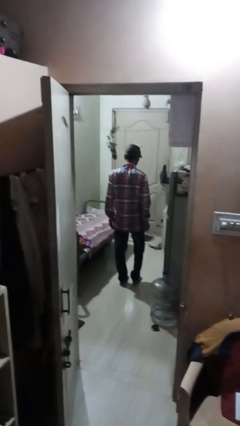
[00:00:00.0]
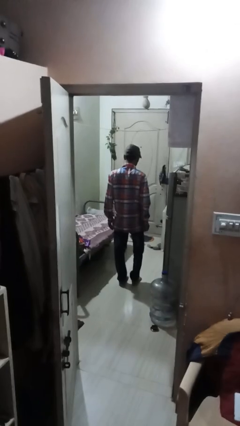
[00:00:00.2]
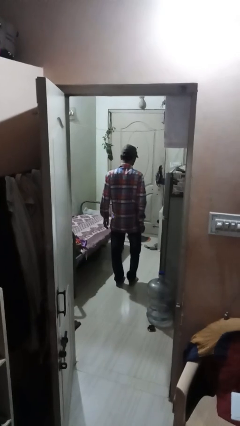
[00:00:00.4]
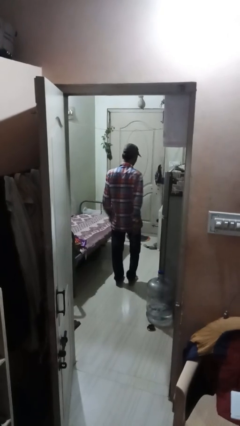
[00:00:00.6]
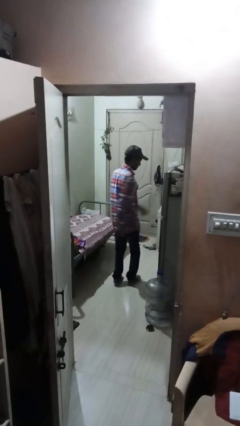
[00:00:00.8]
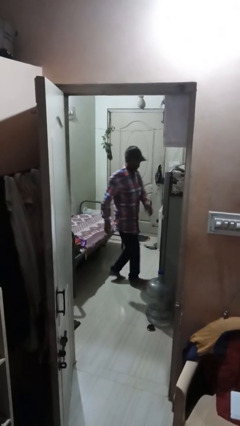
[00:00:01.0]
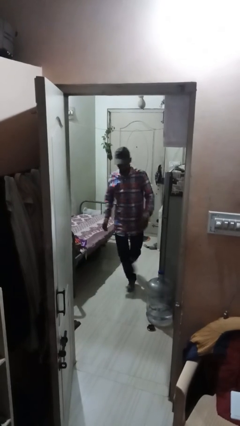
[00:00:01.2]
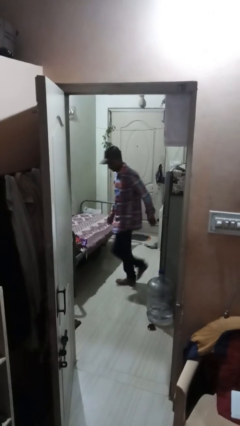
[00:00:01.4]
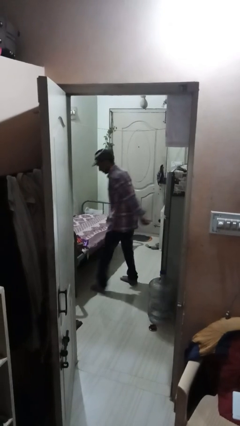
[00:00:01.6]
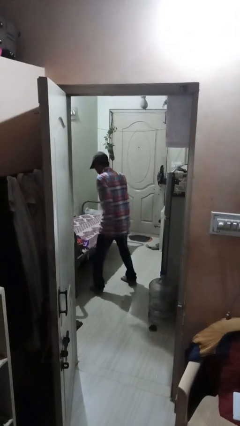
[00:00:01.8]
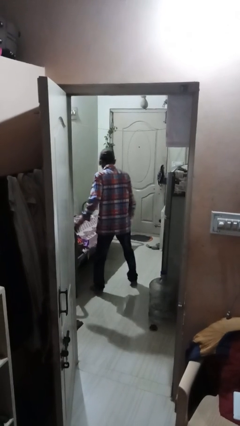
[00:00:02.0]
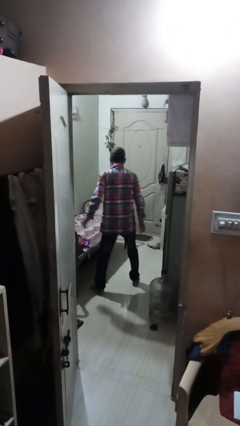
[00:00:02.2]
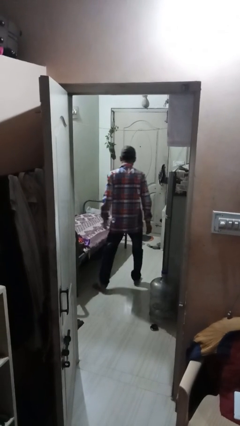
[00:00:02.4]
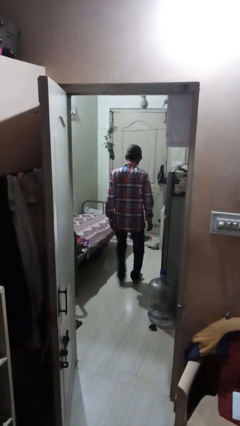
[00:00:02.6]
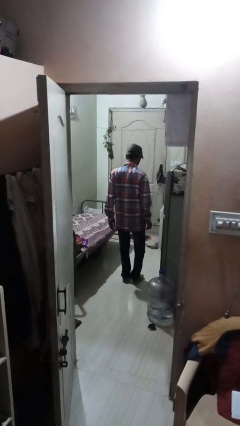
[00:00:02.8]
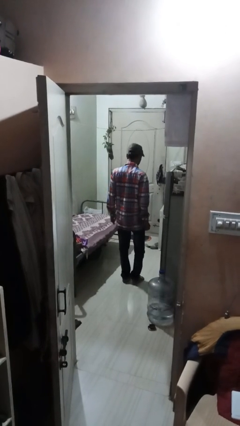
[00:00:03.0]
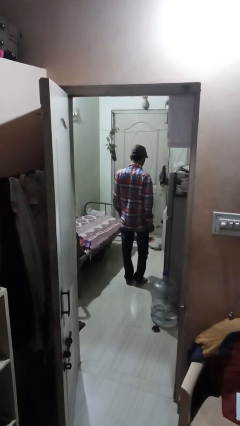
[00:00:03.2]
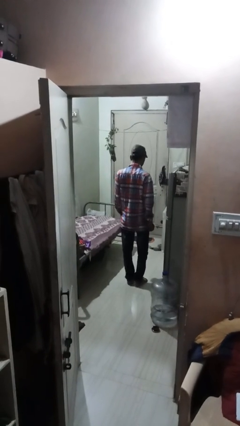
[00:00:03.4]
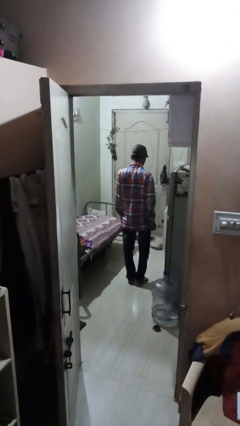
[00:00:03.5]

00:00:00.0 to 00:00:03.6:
person twirls

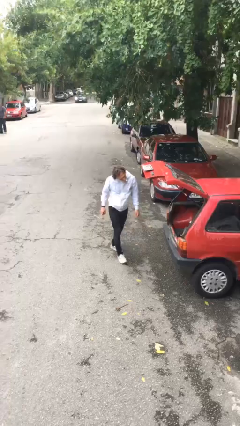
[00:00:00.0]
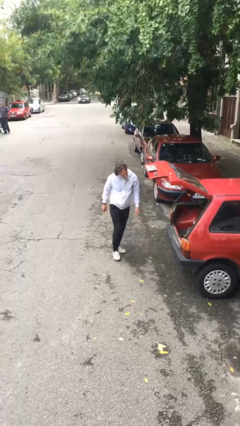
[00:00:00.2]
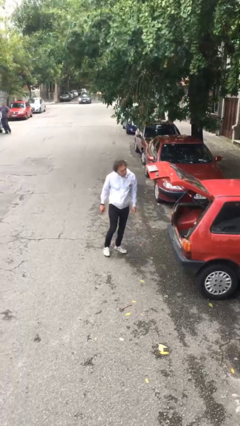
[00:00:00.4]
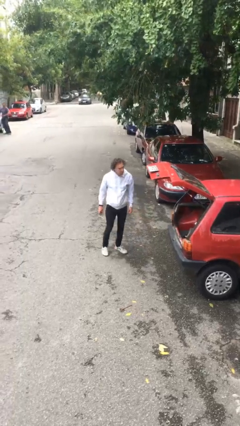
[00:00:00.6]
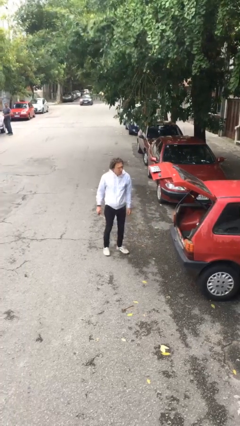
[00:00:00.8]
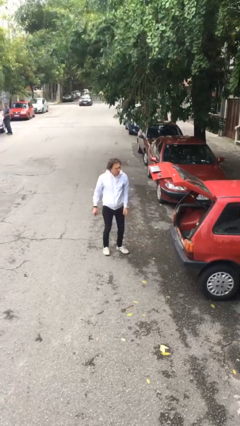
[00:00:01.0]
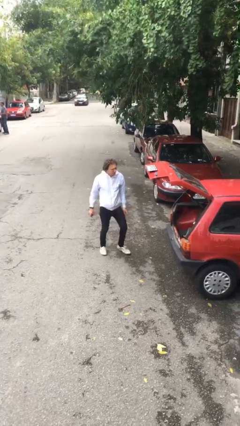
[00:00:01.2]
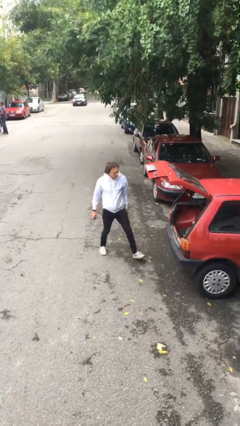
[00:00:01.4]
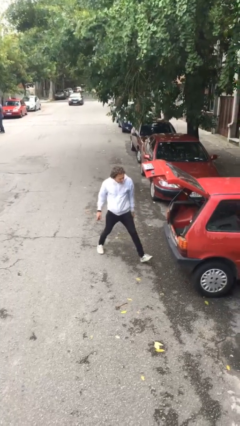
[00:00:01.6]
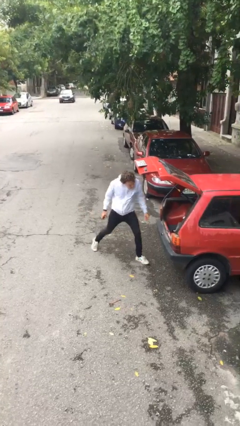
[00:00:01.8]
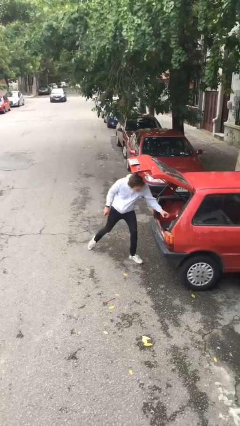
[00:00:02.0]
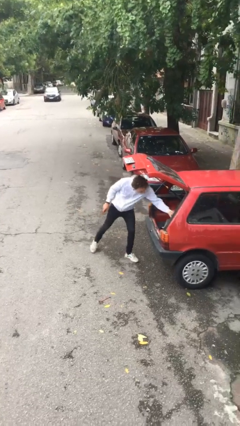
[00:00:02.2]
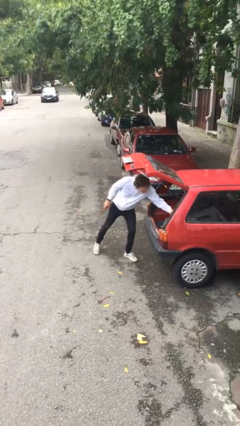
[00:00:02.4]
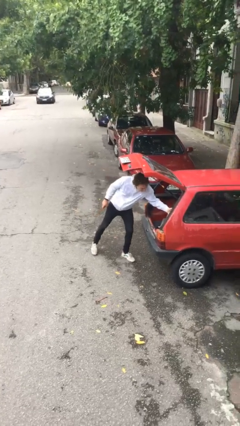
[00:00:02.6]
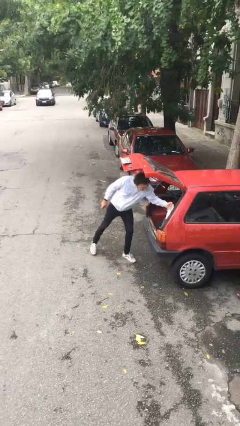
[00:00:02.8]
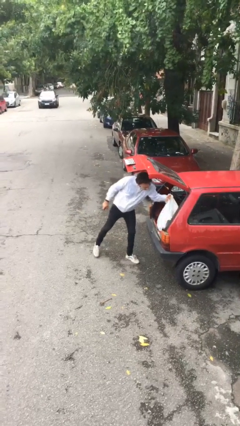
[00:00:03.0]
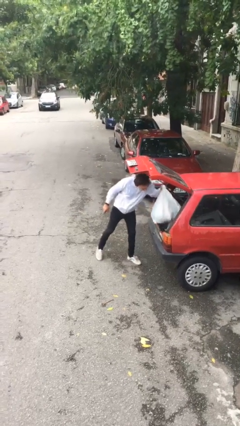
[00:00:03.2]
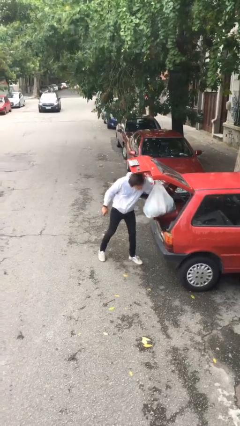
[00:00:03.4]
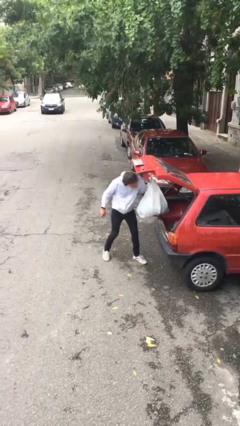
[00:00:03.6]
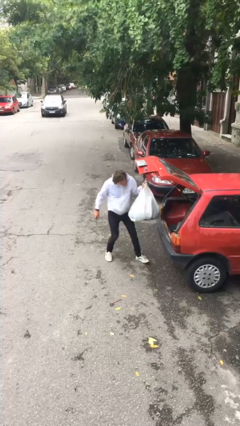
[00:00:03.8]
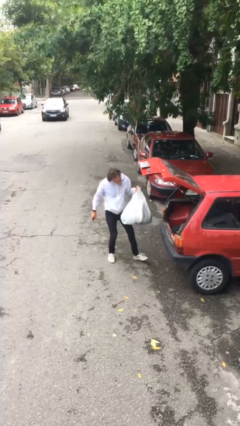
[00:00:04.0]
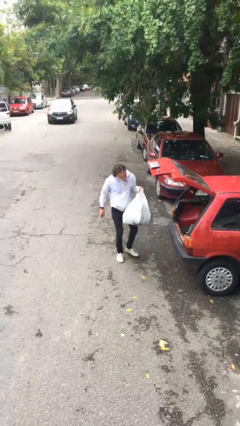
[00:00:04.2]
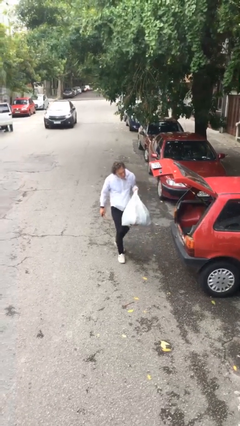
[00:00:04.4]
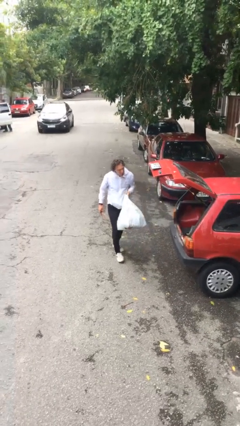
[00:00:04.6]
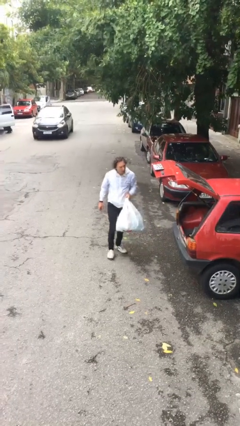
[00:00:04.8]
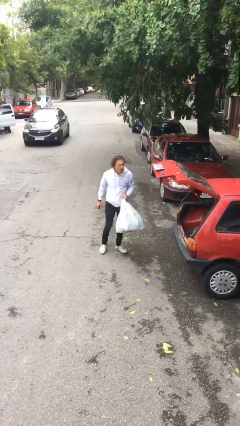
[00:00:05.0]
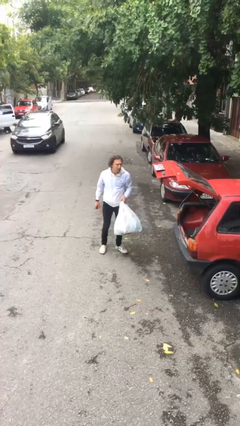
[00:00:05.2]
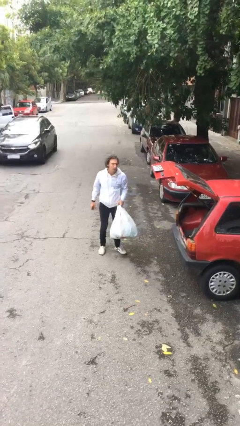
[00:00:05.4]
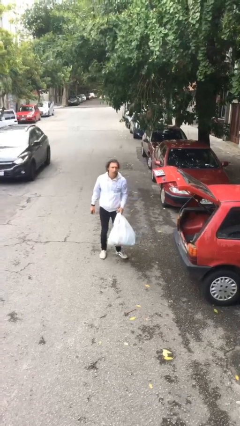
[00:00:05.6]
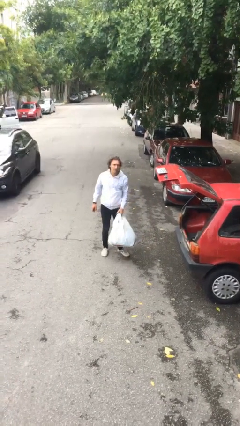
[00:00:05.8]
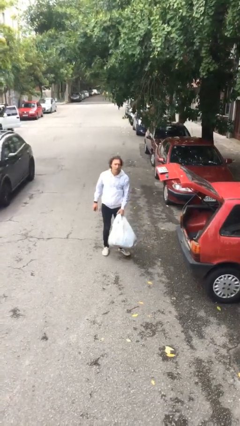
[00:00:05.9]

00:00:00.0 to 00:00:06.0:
person unloads car

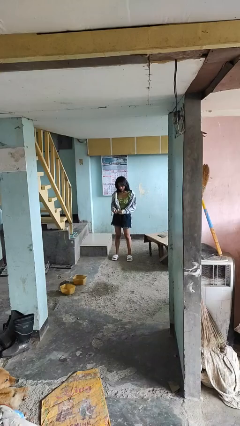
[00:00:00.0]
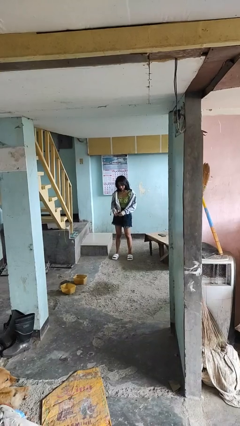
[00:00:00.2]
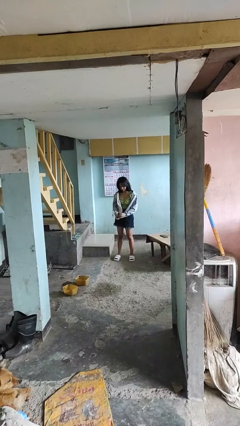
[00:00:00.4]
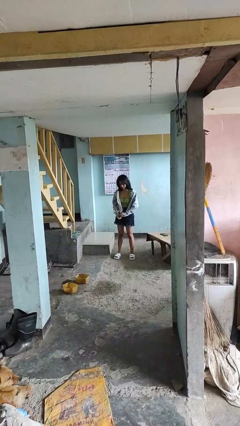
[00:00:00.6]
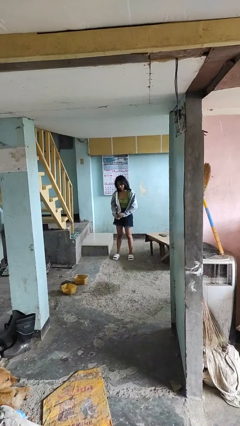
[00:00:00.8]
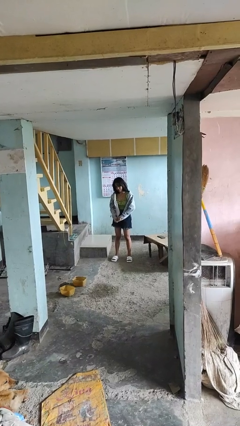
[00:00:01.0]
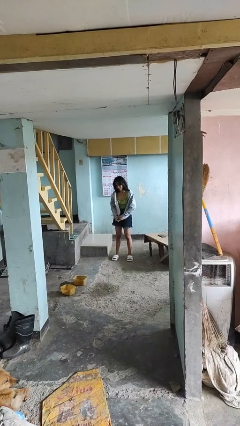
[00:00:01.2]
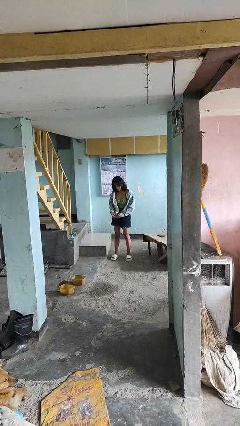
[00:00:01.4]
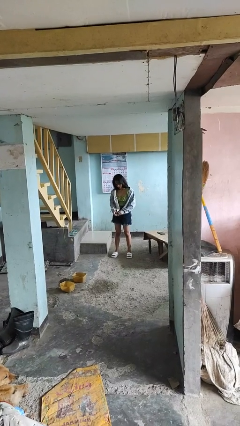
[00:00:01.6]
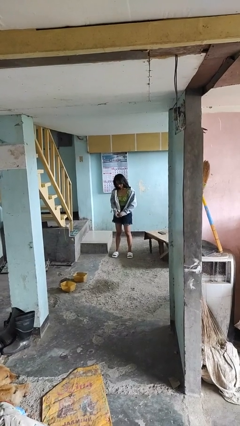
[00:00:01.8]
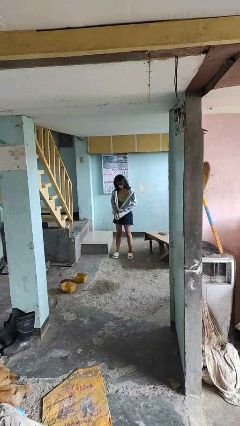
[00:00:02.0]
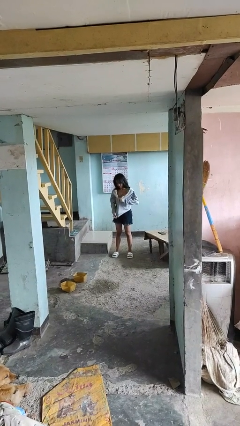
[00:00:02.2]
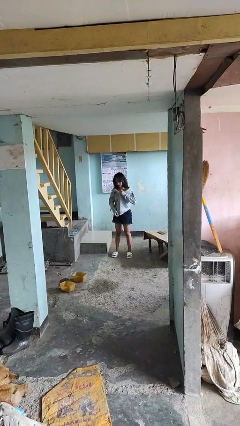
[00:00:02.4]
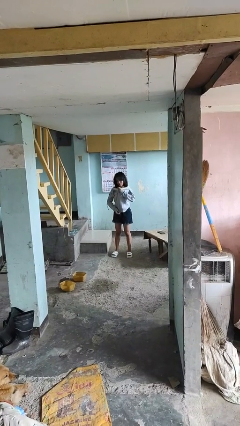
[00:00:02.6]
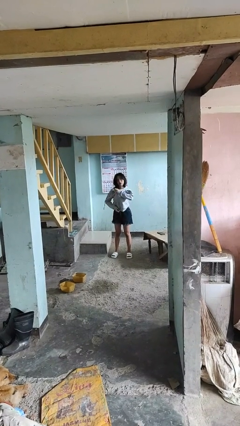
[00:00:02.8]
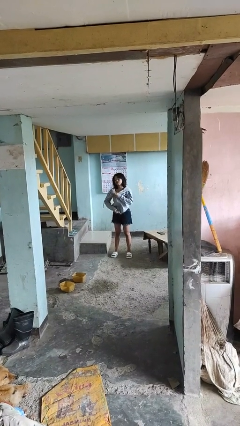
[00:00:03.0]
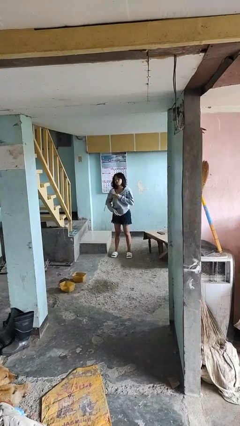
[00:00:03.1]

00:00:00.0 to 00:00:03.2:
person zips up jacket

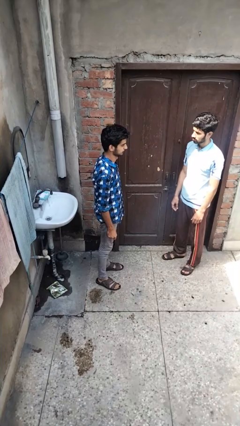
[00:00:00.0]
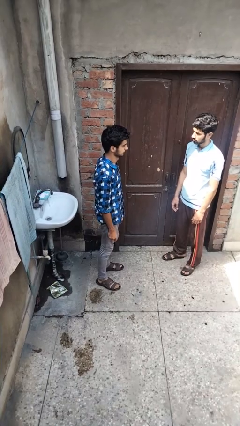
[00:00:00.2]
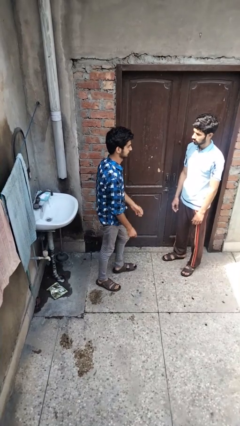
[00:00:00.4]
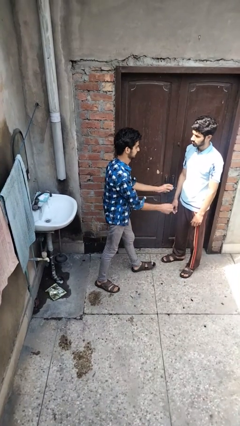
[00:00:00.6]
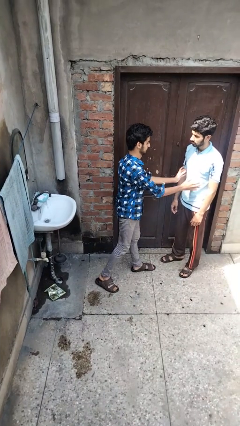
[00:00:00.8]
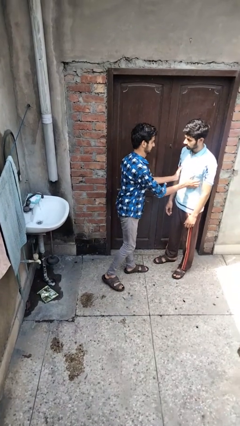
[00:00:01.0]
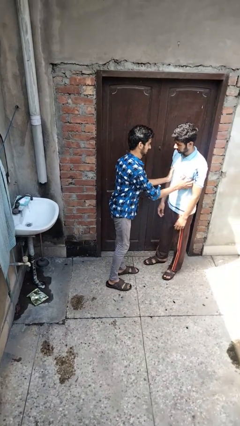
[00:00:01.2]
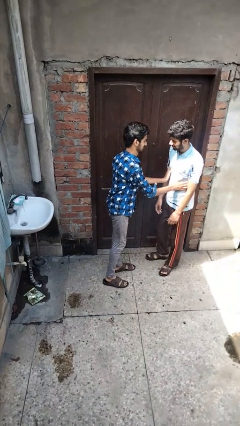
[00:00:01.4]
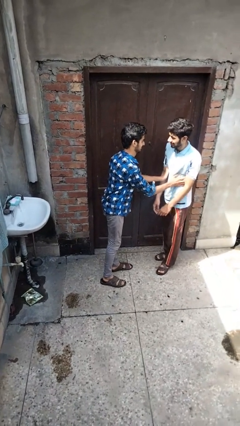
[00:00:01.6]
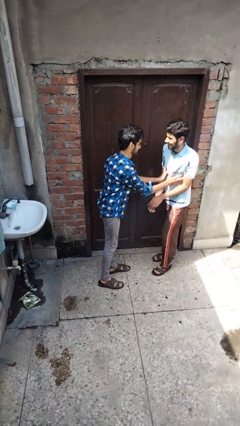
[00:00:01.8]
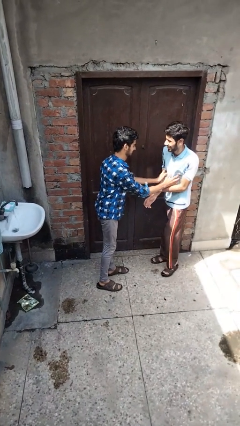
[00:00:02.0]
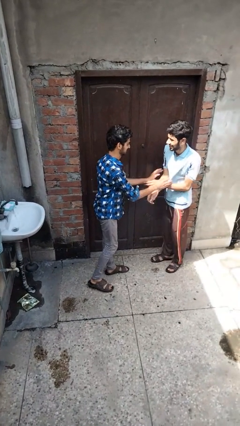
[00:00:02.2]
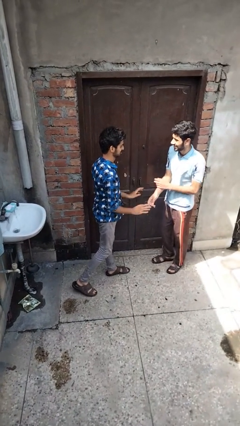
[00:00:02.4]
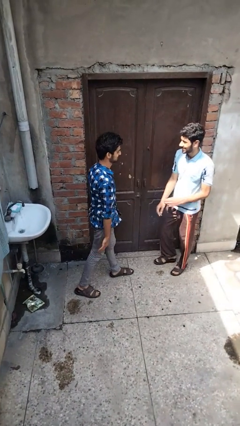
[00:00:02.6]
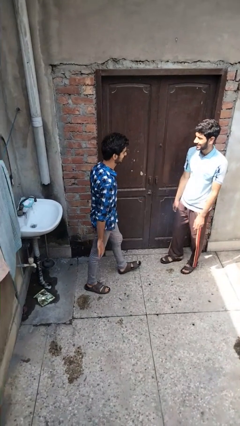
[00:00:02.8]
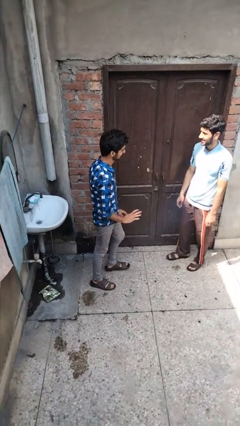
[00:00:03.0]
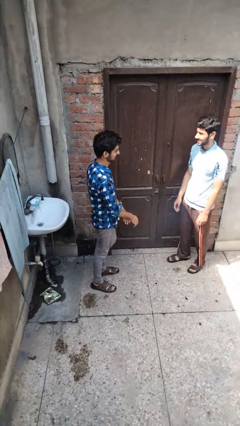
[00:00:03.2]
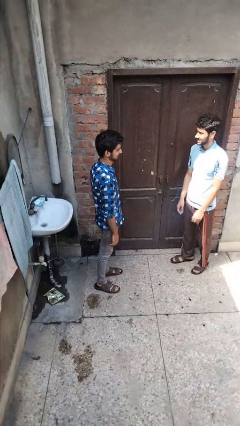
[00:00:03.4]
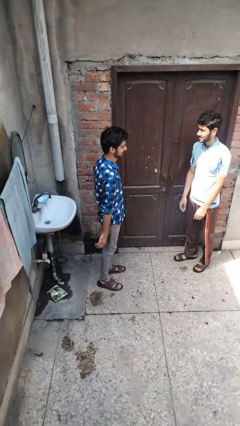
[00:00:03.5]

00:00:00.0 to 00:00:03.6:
person tickles person

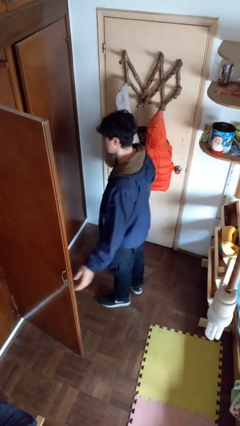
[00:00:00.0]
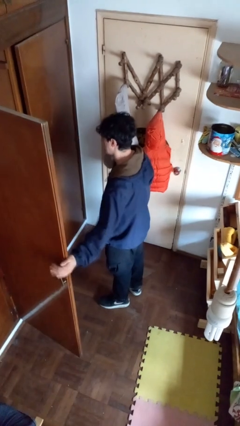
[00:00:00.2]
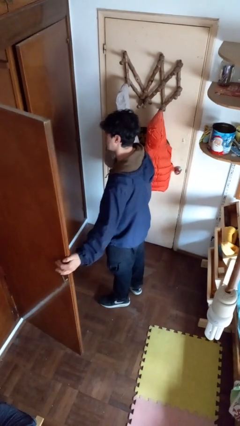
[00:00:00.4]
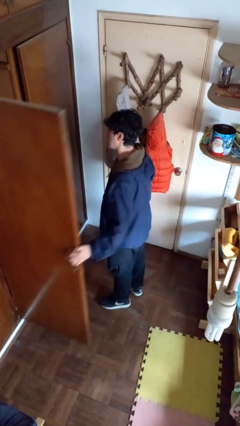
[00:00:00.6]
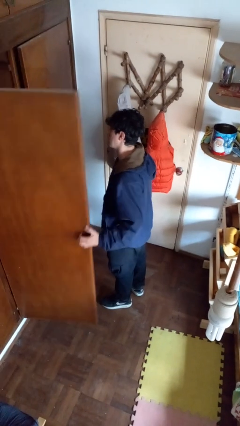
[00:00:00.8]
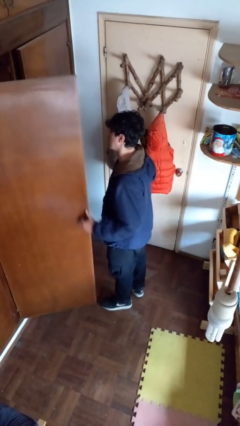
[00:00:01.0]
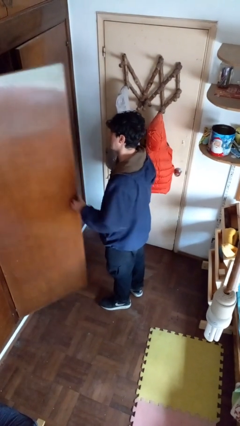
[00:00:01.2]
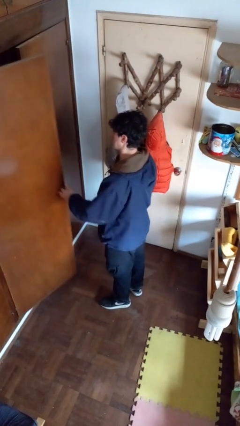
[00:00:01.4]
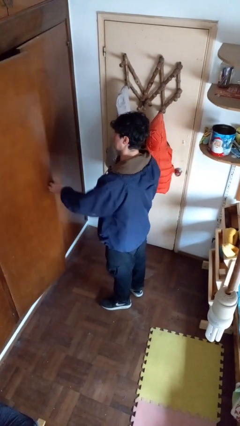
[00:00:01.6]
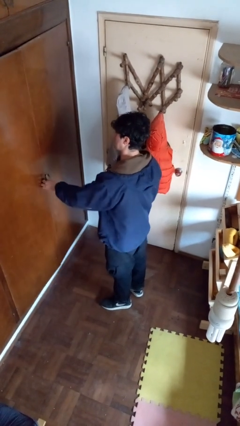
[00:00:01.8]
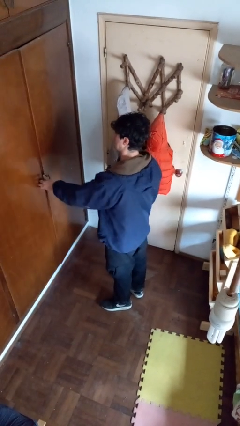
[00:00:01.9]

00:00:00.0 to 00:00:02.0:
person closes closet door
